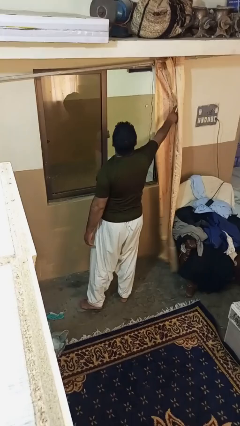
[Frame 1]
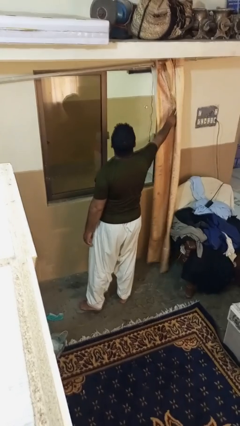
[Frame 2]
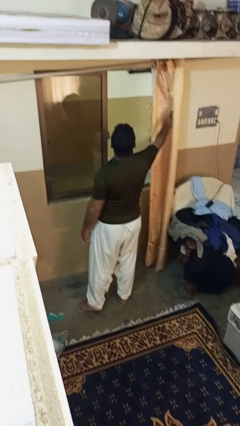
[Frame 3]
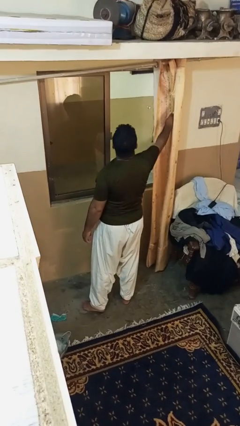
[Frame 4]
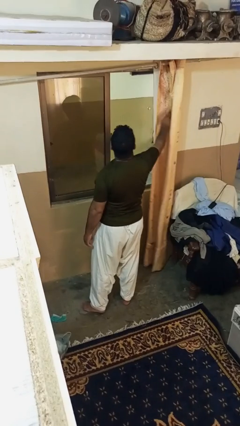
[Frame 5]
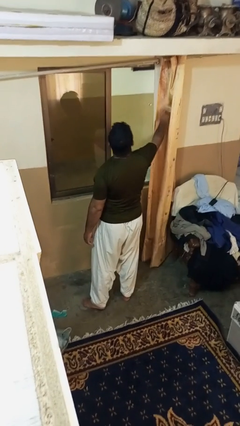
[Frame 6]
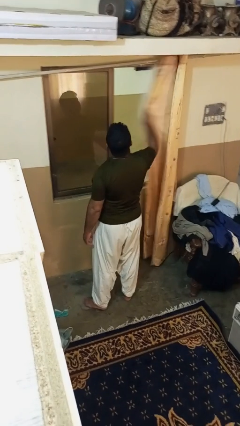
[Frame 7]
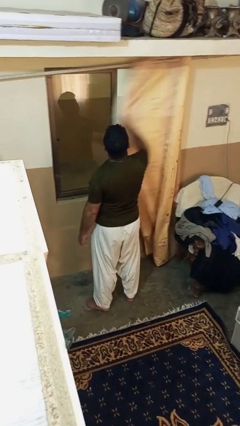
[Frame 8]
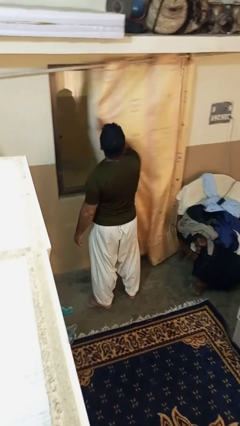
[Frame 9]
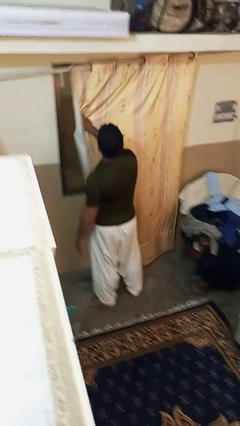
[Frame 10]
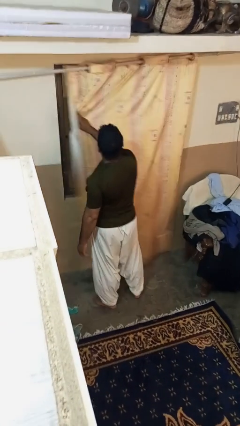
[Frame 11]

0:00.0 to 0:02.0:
person closes curtains

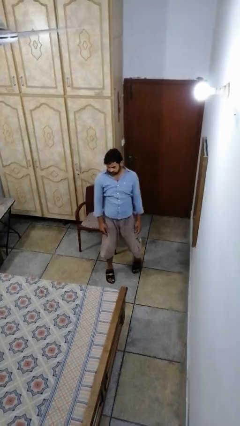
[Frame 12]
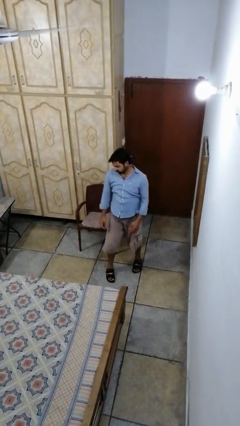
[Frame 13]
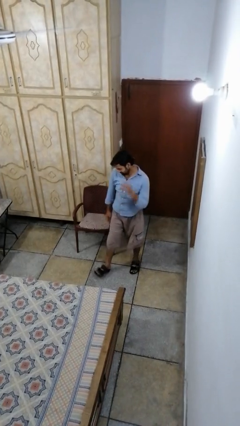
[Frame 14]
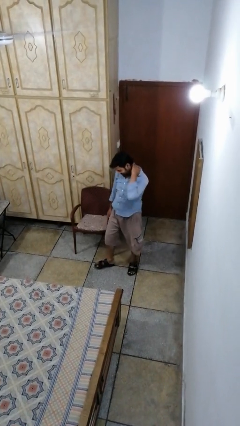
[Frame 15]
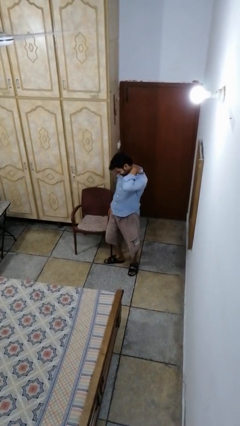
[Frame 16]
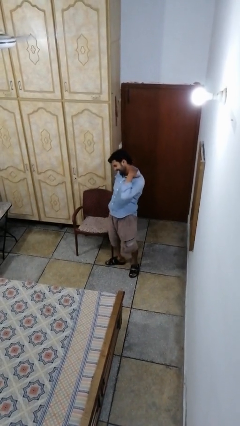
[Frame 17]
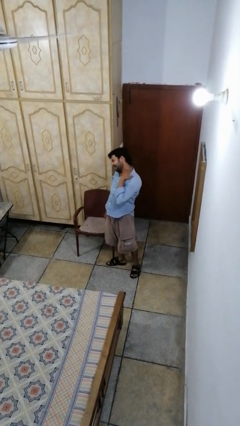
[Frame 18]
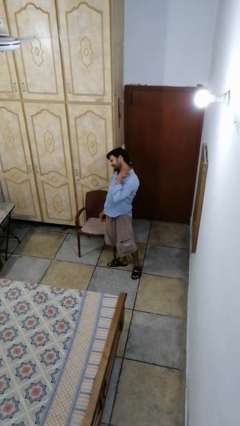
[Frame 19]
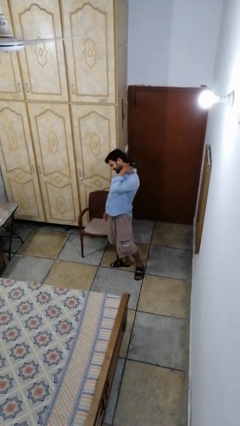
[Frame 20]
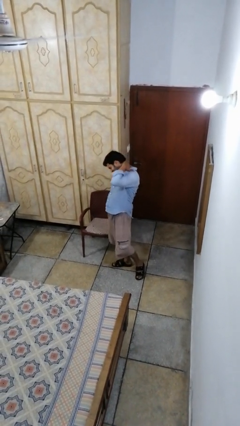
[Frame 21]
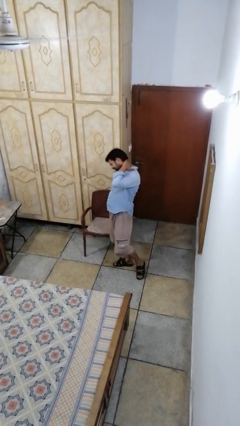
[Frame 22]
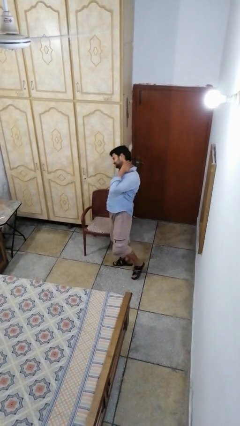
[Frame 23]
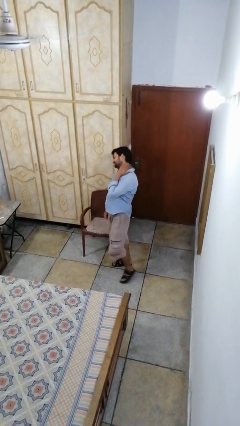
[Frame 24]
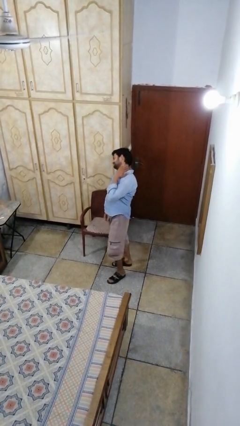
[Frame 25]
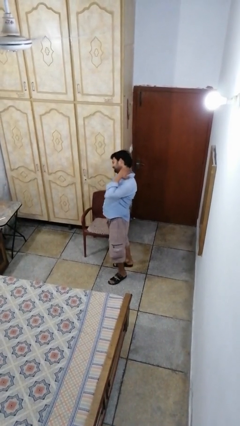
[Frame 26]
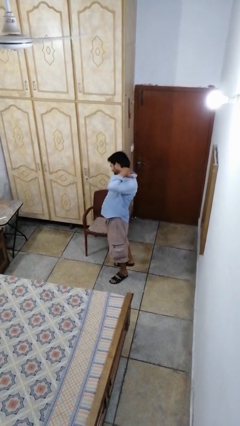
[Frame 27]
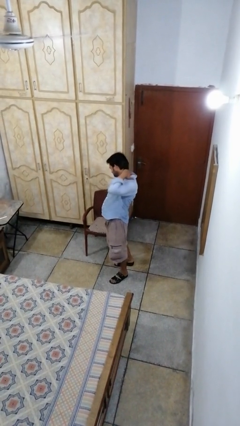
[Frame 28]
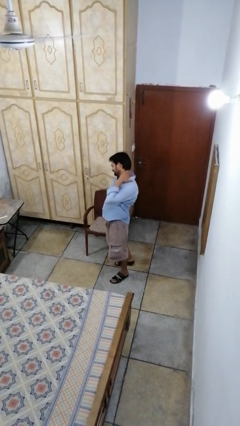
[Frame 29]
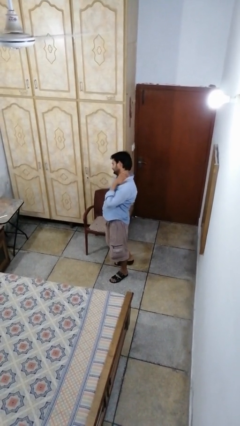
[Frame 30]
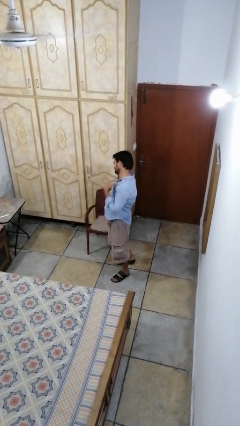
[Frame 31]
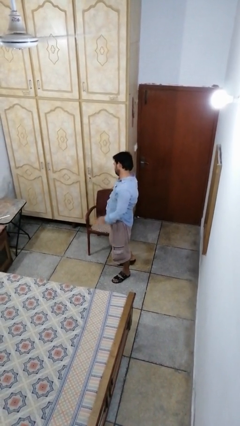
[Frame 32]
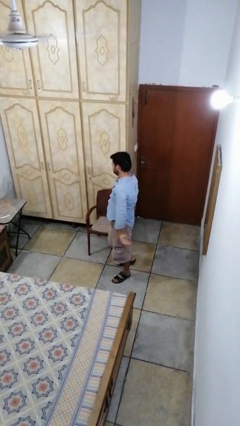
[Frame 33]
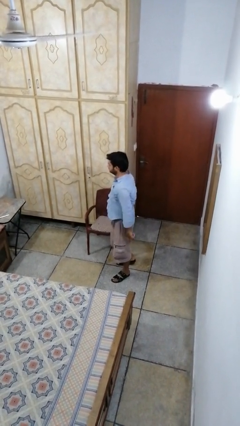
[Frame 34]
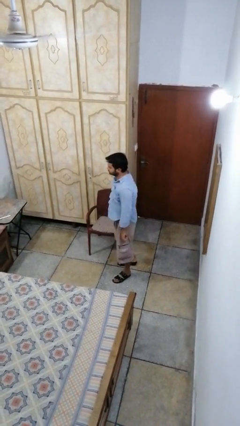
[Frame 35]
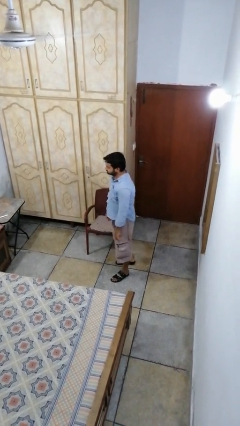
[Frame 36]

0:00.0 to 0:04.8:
person rubs neck

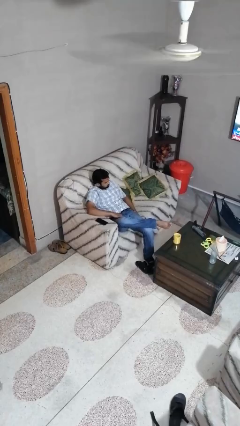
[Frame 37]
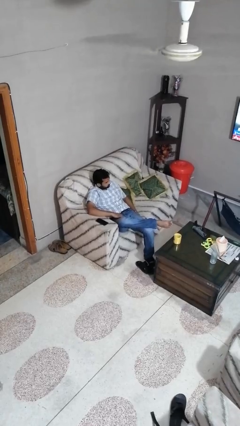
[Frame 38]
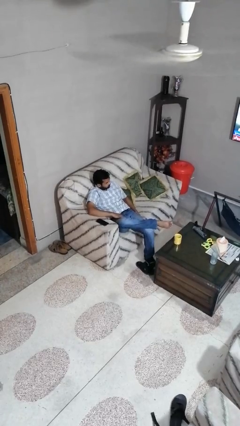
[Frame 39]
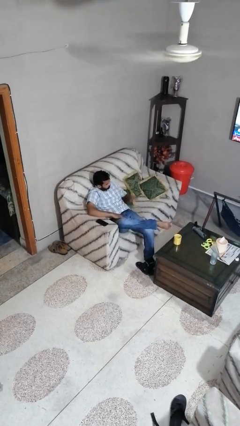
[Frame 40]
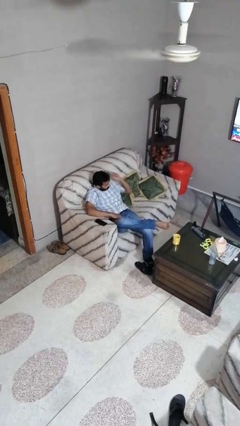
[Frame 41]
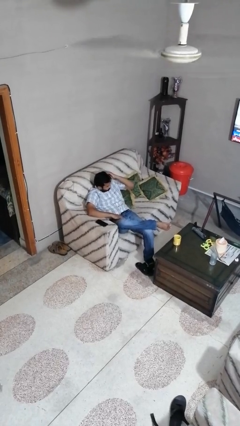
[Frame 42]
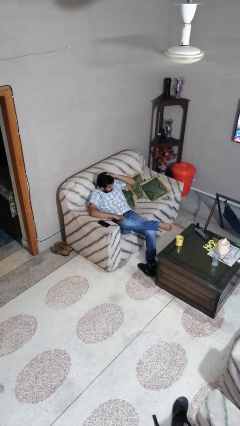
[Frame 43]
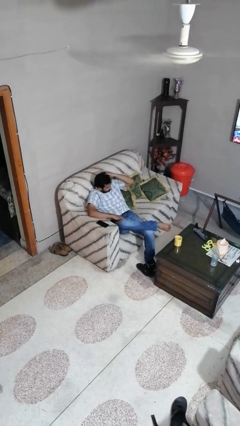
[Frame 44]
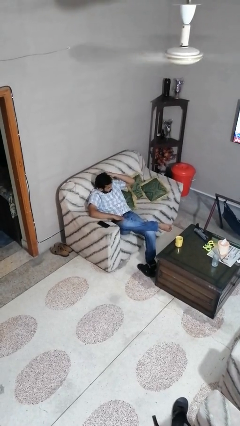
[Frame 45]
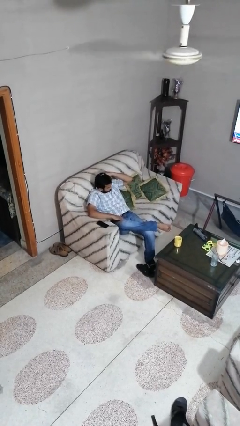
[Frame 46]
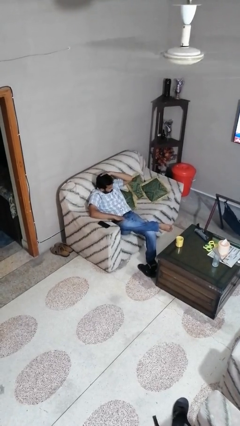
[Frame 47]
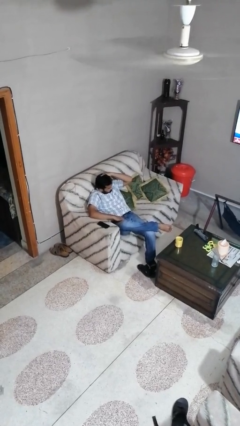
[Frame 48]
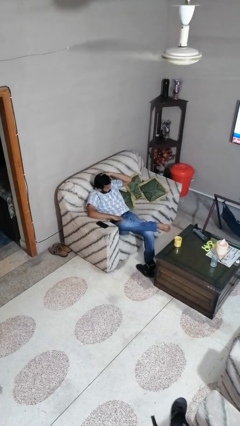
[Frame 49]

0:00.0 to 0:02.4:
person strokes hair

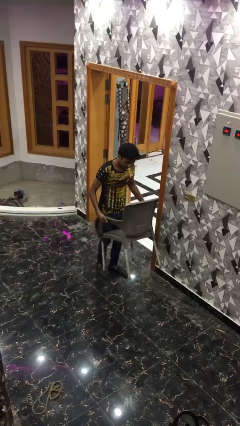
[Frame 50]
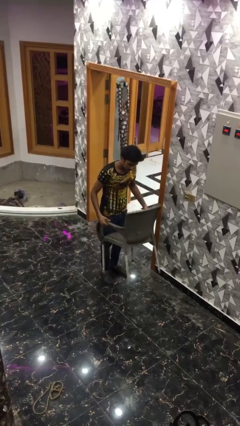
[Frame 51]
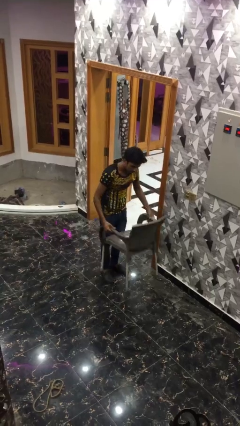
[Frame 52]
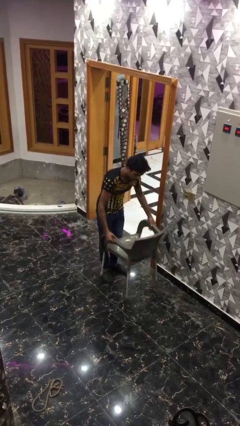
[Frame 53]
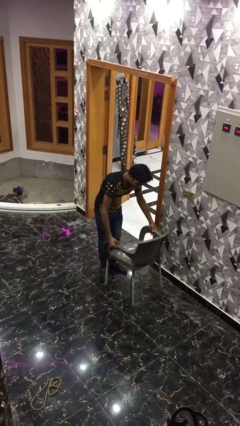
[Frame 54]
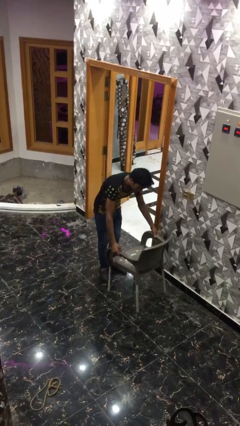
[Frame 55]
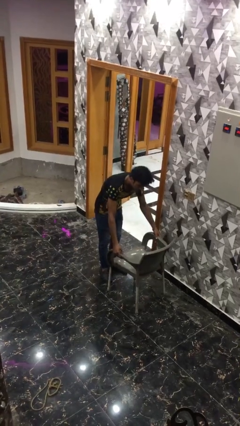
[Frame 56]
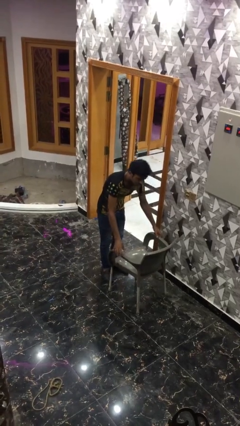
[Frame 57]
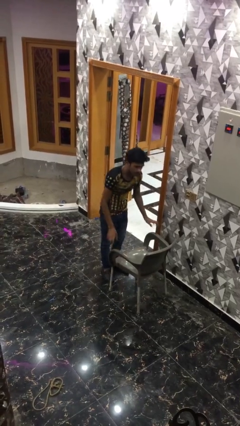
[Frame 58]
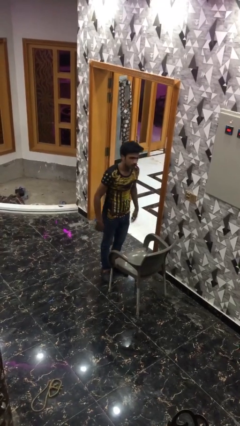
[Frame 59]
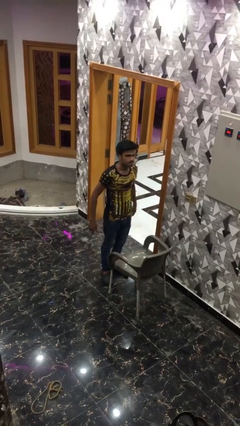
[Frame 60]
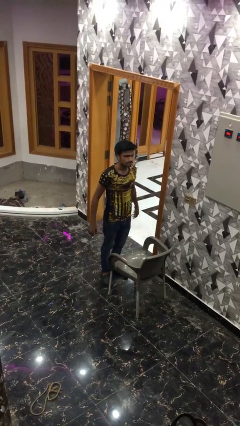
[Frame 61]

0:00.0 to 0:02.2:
person puts down object on floor

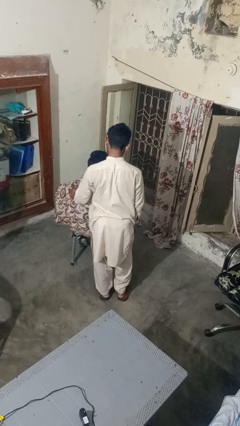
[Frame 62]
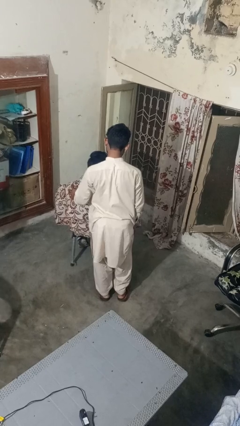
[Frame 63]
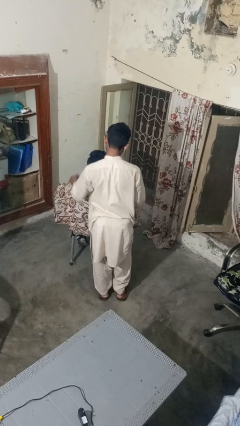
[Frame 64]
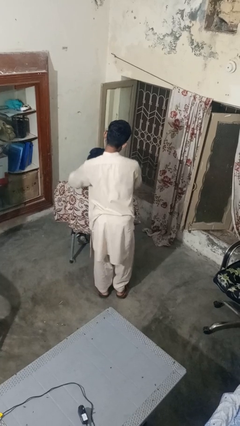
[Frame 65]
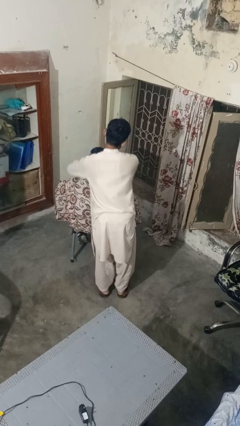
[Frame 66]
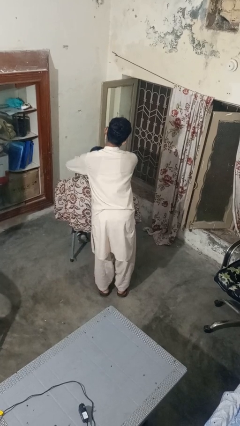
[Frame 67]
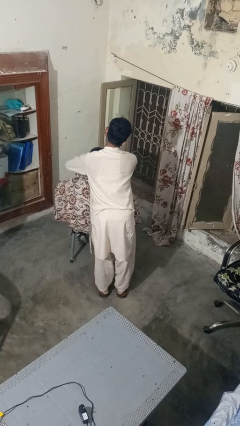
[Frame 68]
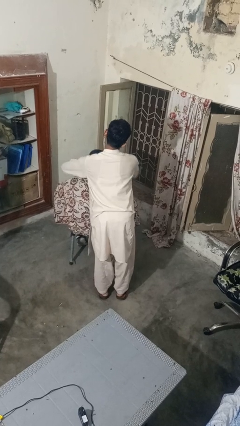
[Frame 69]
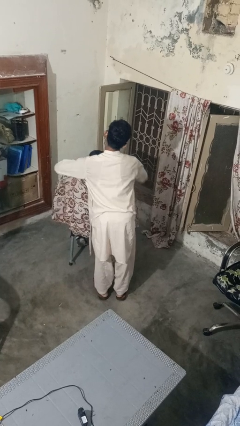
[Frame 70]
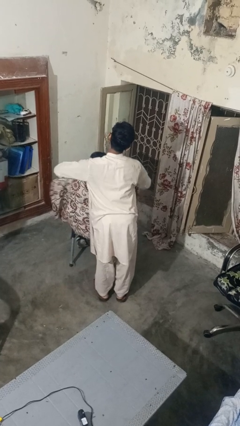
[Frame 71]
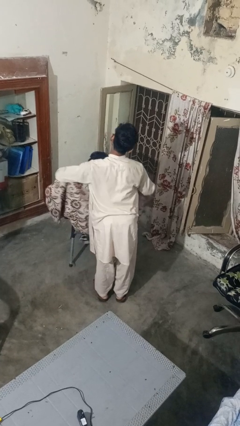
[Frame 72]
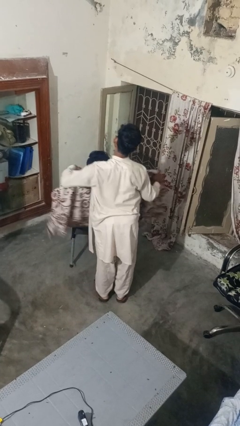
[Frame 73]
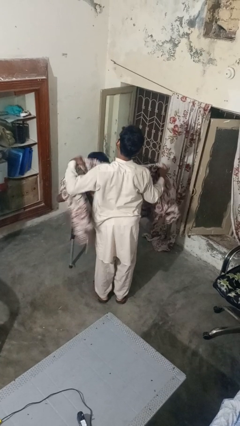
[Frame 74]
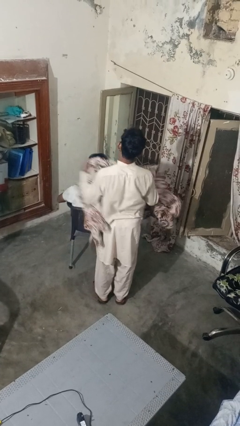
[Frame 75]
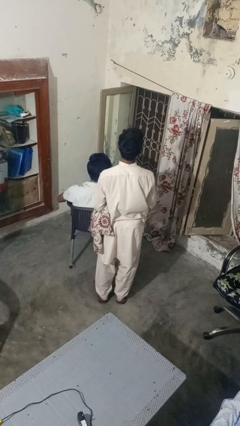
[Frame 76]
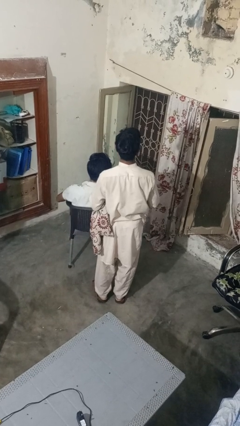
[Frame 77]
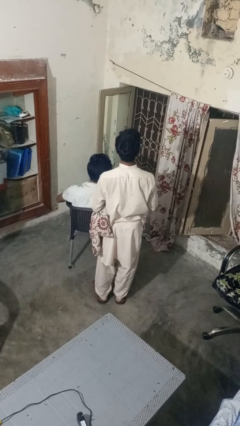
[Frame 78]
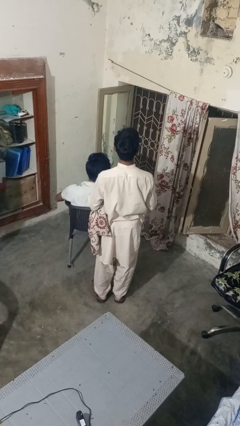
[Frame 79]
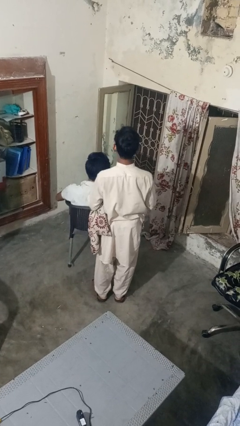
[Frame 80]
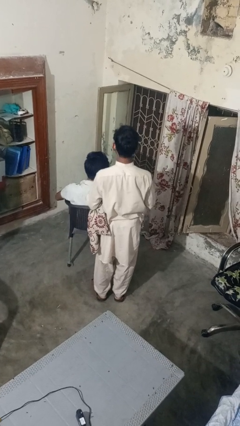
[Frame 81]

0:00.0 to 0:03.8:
person uncovers friend with blanket

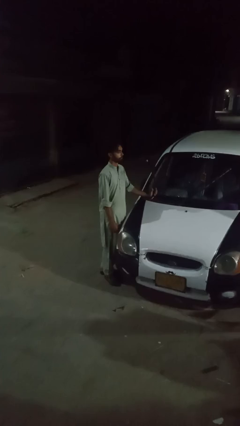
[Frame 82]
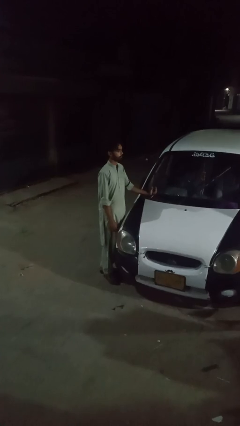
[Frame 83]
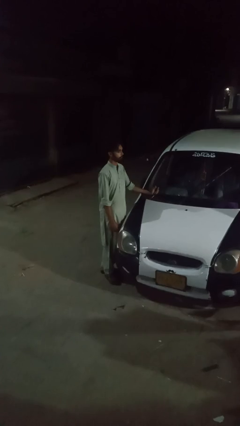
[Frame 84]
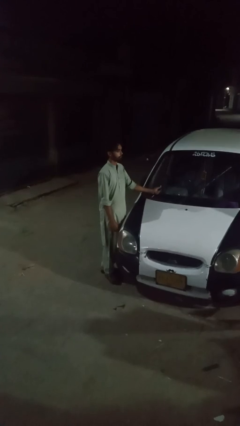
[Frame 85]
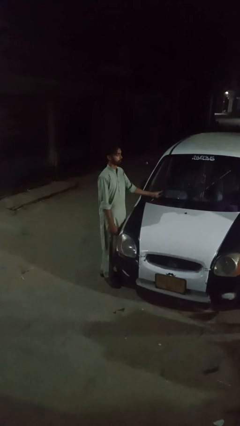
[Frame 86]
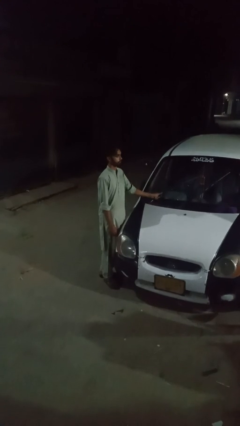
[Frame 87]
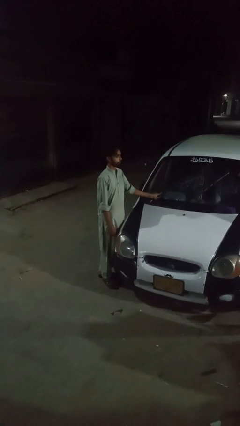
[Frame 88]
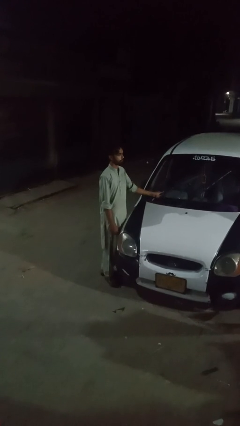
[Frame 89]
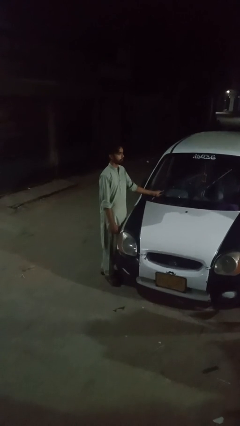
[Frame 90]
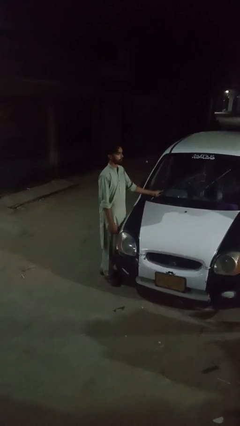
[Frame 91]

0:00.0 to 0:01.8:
person flips down car wipers
